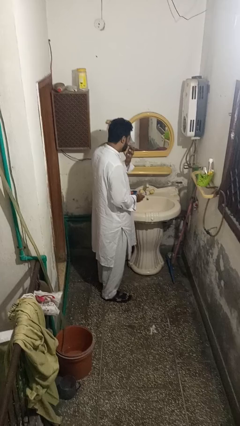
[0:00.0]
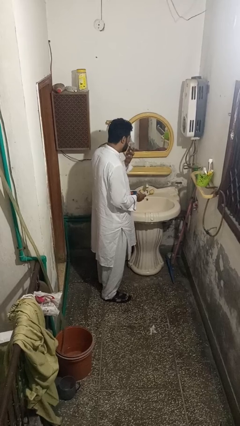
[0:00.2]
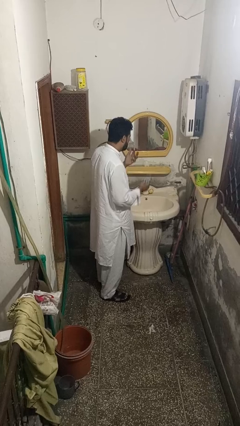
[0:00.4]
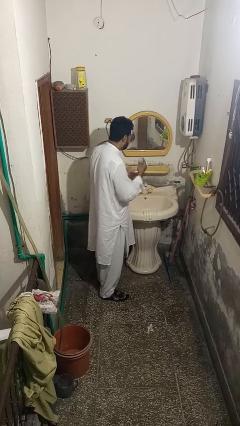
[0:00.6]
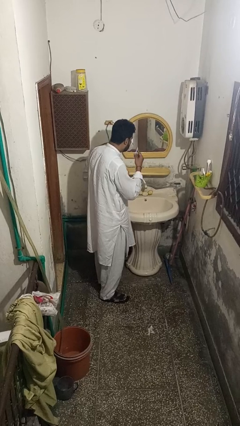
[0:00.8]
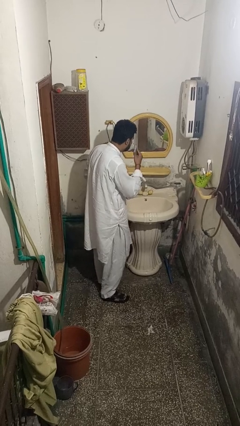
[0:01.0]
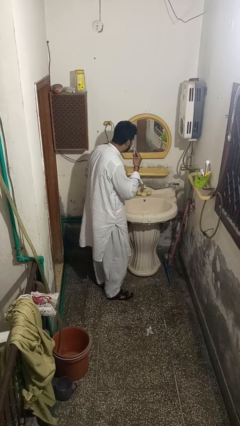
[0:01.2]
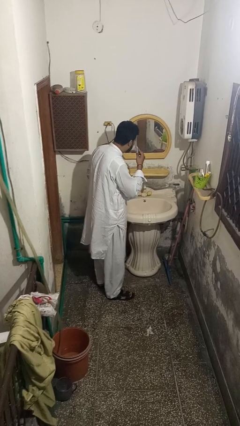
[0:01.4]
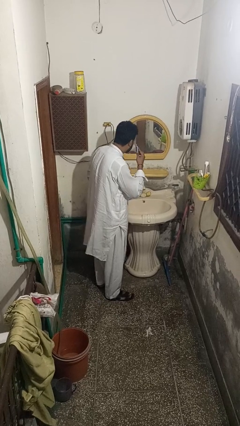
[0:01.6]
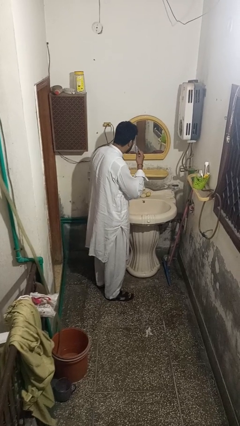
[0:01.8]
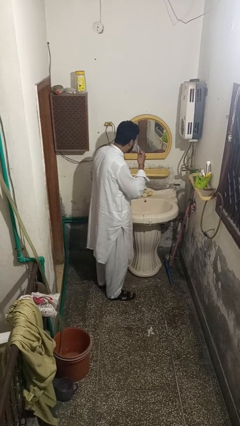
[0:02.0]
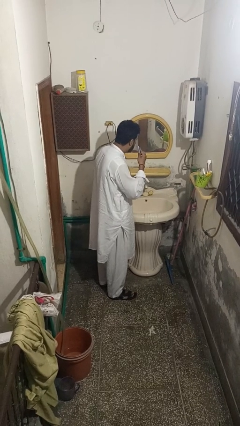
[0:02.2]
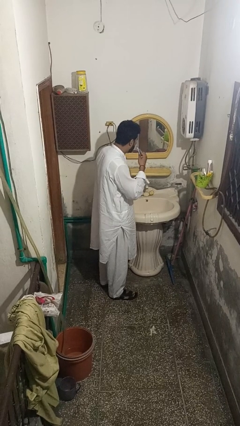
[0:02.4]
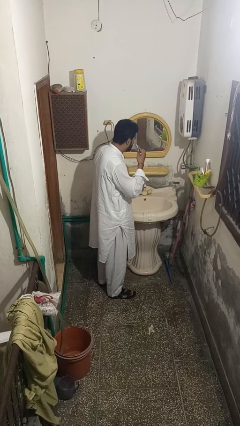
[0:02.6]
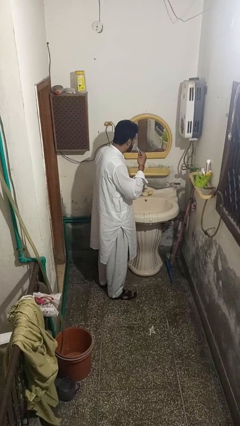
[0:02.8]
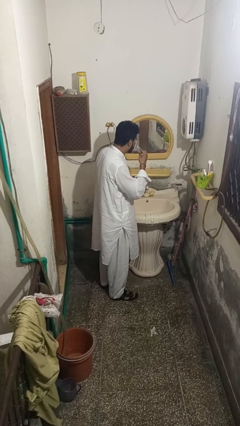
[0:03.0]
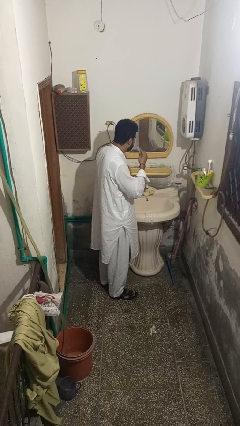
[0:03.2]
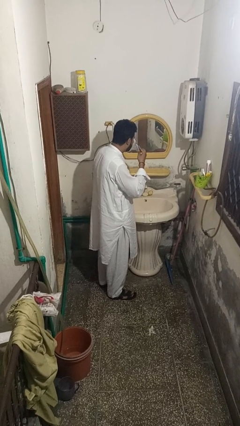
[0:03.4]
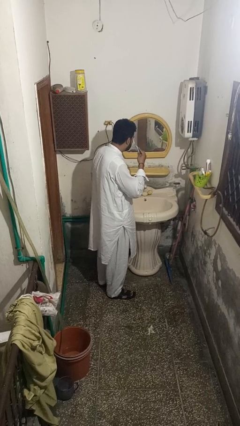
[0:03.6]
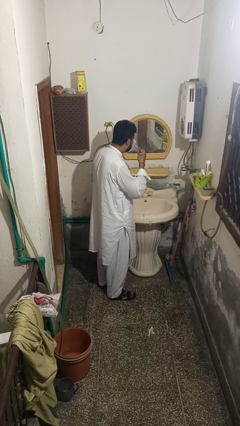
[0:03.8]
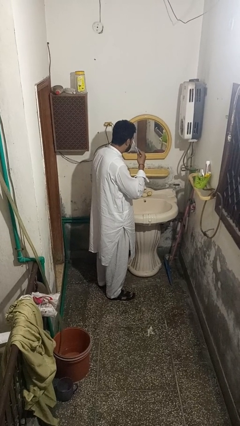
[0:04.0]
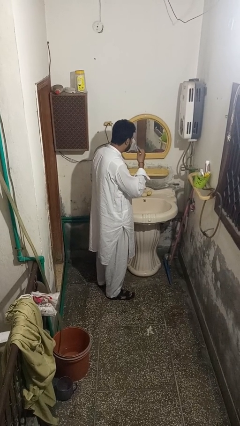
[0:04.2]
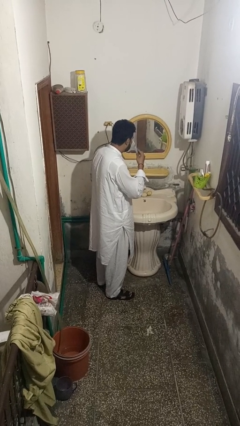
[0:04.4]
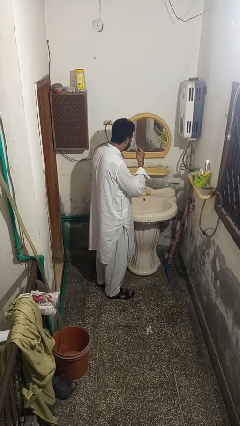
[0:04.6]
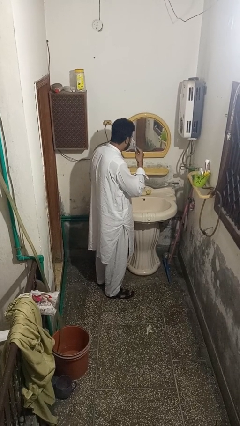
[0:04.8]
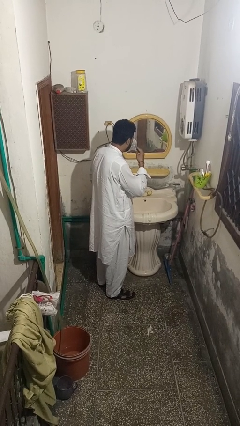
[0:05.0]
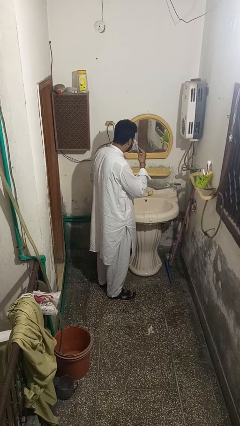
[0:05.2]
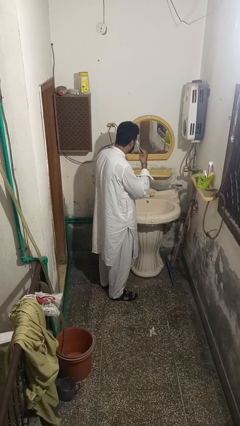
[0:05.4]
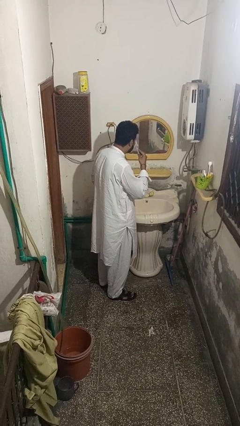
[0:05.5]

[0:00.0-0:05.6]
person shaves face

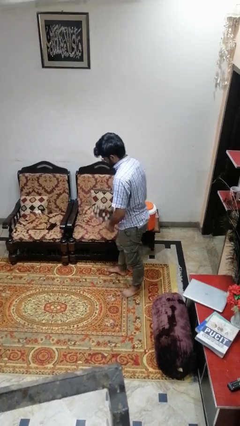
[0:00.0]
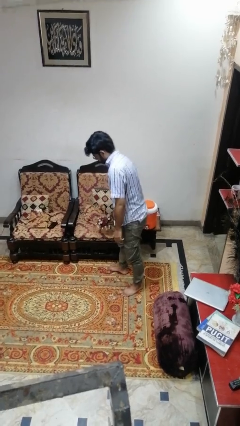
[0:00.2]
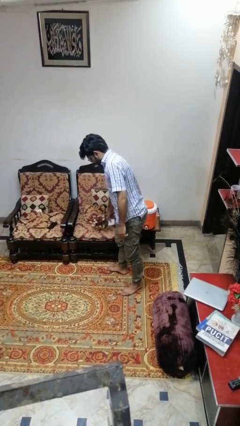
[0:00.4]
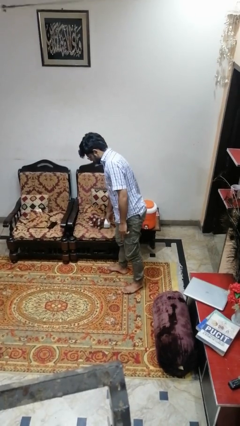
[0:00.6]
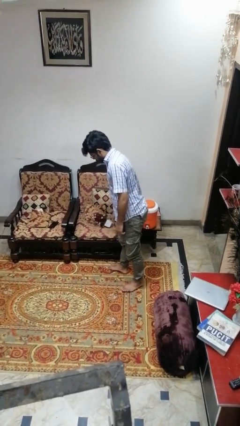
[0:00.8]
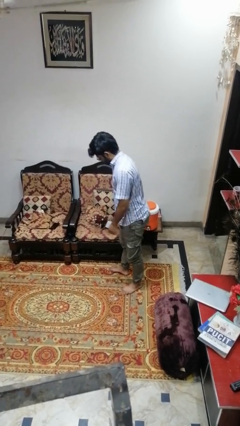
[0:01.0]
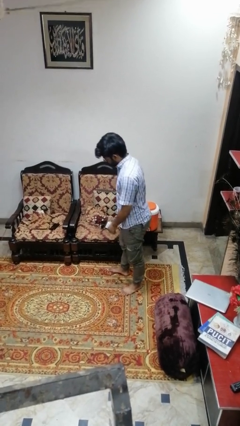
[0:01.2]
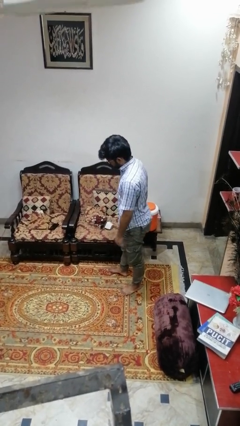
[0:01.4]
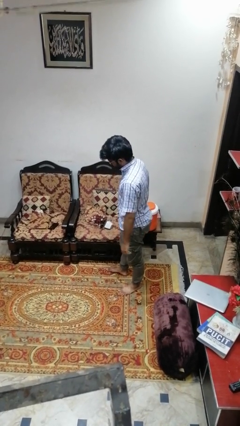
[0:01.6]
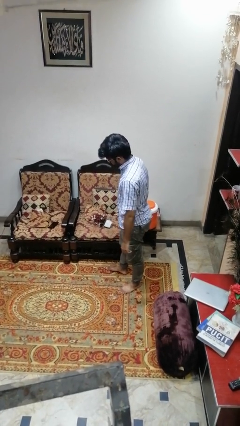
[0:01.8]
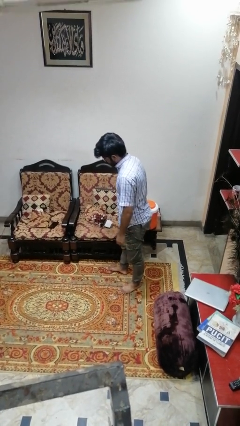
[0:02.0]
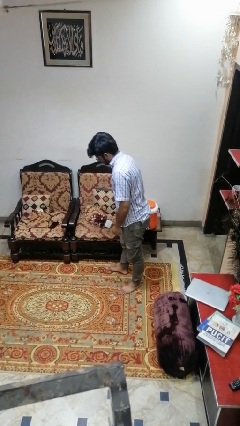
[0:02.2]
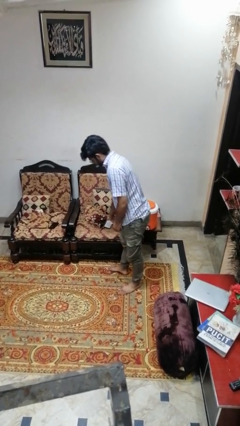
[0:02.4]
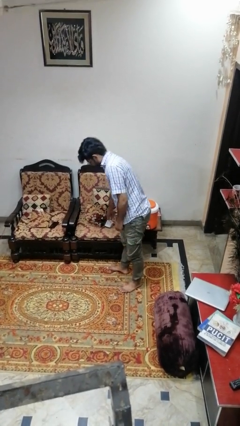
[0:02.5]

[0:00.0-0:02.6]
person puts down object on couch

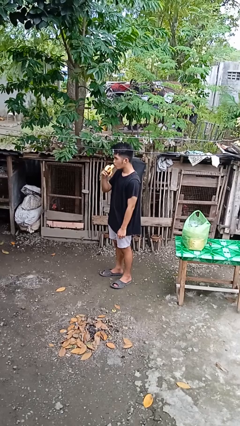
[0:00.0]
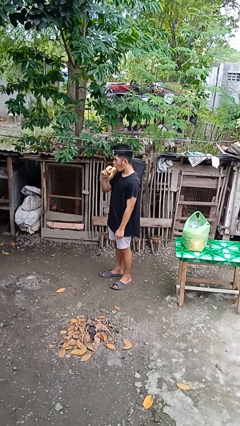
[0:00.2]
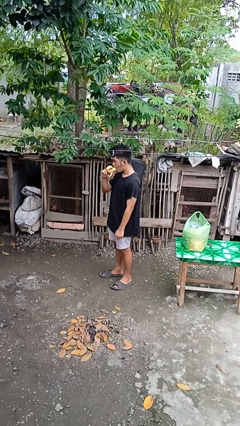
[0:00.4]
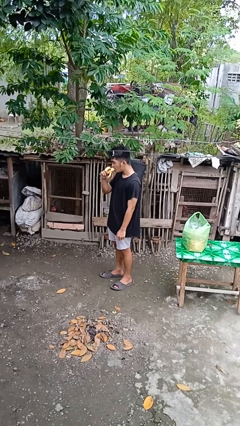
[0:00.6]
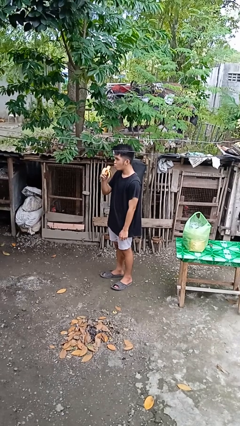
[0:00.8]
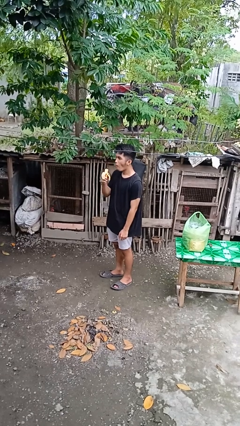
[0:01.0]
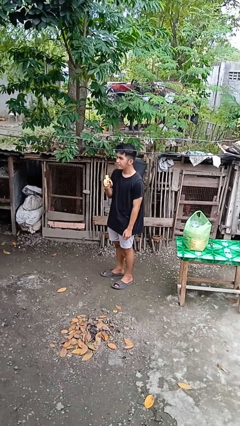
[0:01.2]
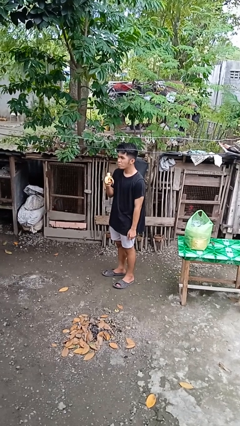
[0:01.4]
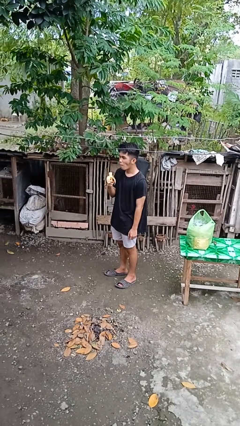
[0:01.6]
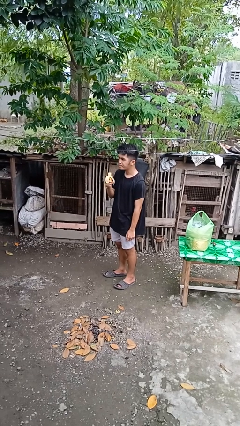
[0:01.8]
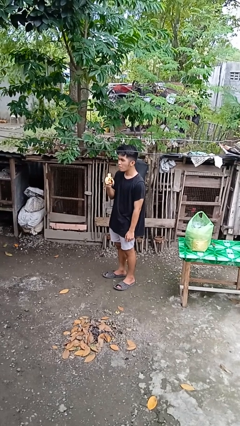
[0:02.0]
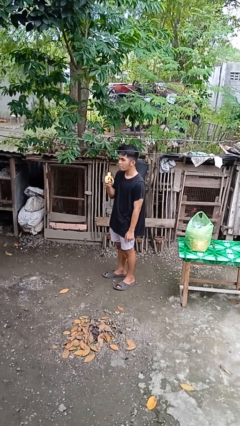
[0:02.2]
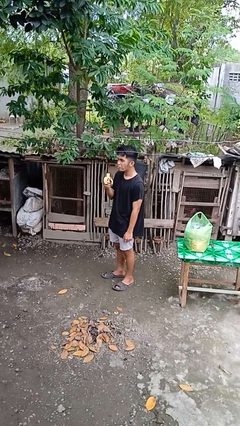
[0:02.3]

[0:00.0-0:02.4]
person eats banana

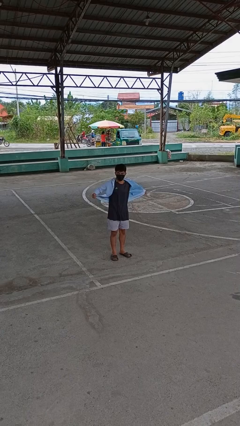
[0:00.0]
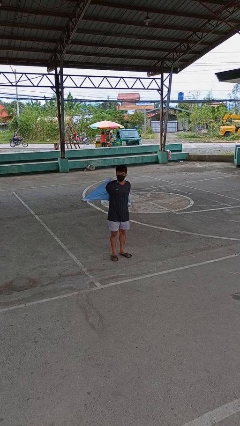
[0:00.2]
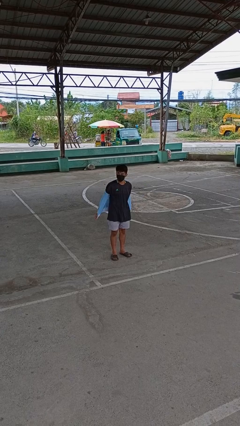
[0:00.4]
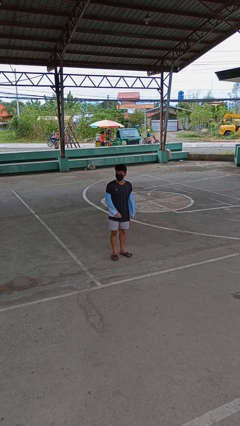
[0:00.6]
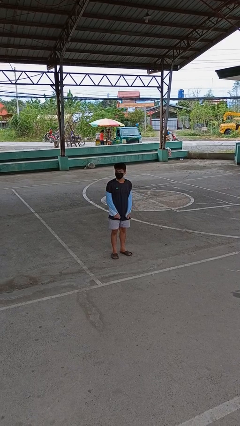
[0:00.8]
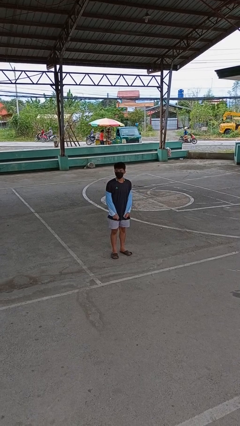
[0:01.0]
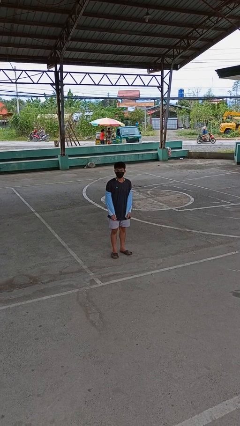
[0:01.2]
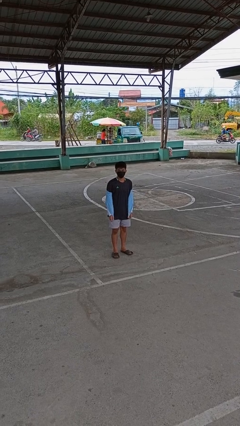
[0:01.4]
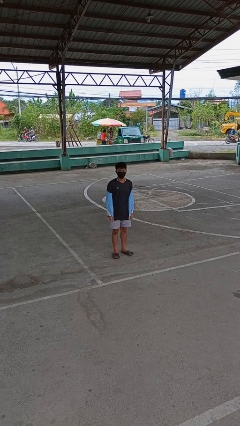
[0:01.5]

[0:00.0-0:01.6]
person takes off jacket

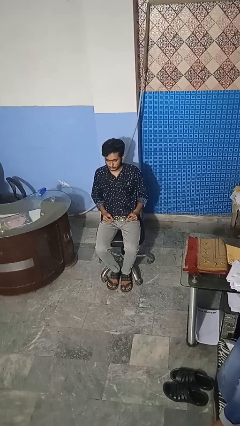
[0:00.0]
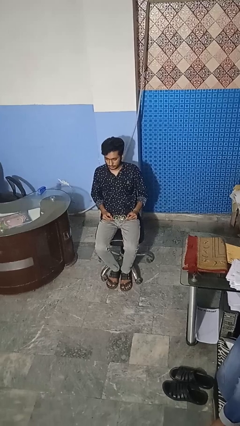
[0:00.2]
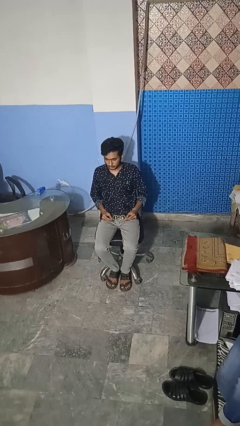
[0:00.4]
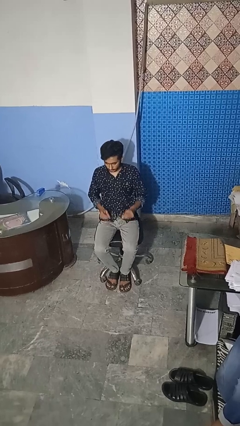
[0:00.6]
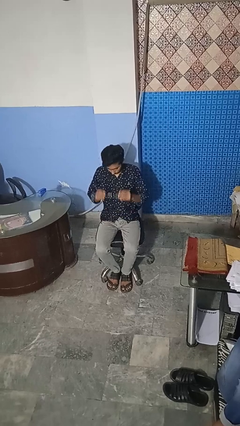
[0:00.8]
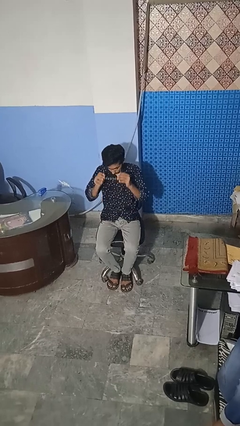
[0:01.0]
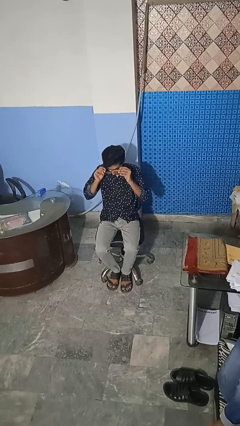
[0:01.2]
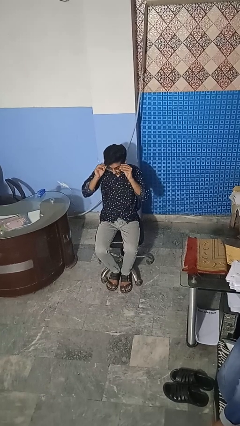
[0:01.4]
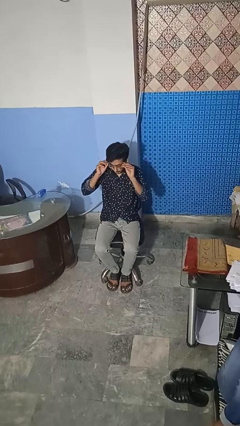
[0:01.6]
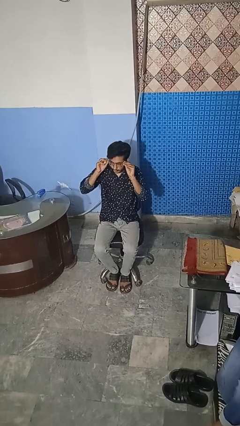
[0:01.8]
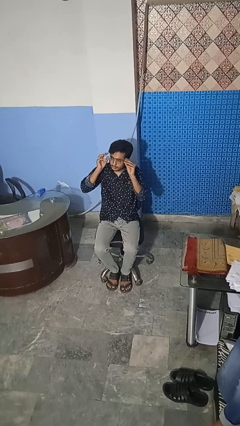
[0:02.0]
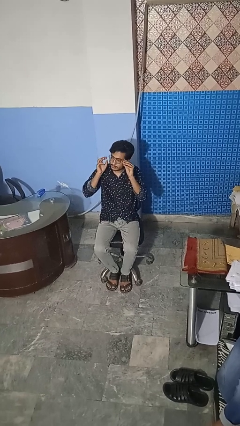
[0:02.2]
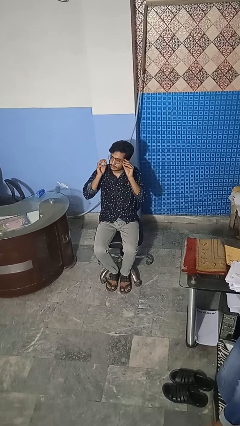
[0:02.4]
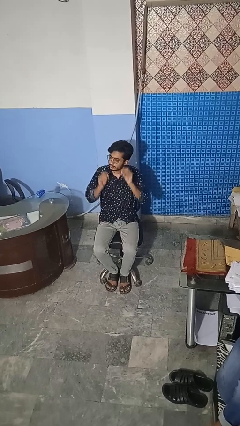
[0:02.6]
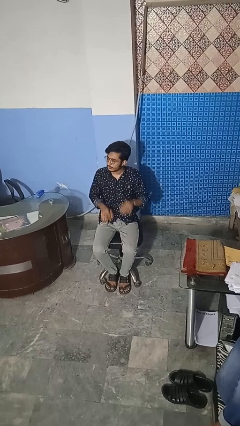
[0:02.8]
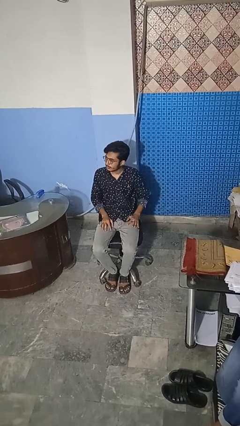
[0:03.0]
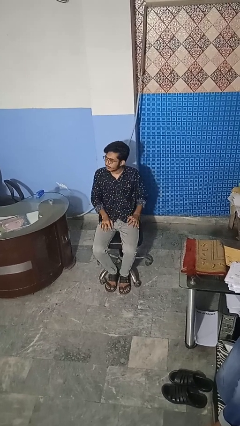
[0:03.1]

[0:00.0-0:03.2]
person puts on glasses

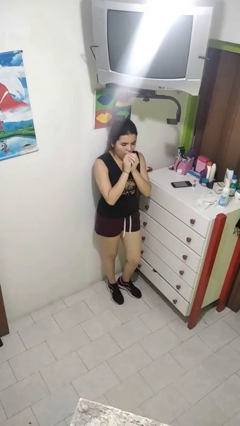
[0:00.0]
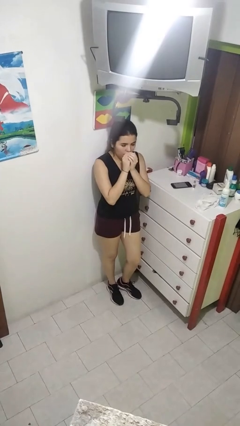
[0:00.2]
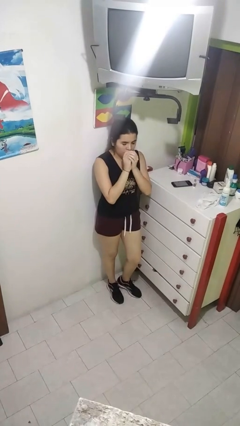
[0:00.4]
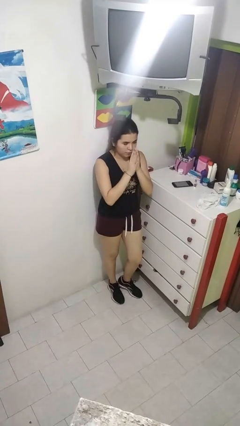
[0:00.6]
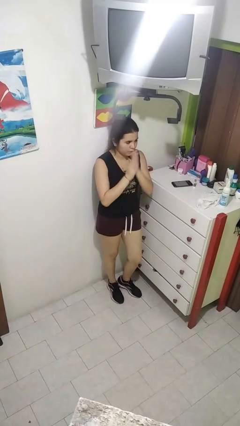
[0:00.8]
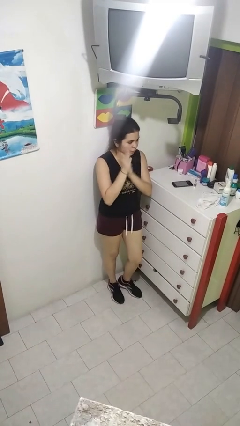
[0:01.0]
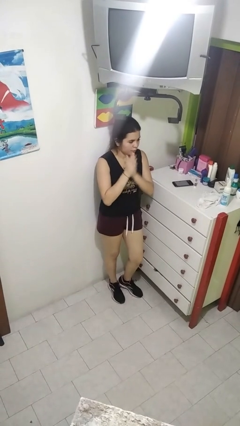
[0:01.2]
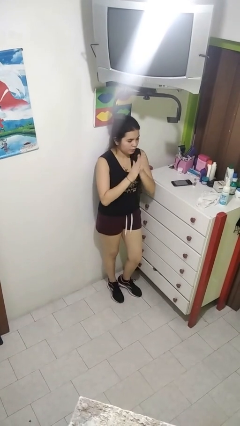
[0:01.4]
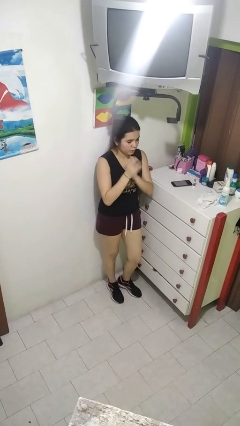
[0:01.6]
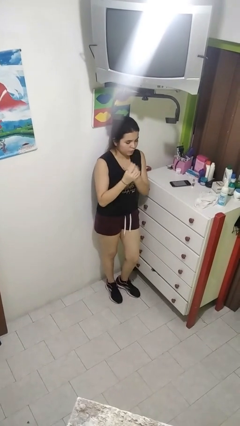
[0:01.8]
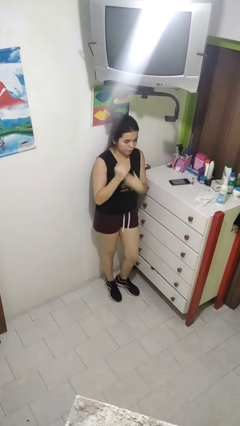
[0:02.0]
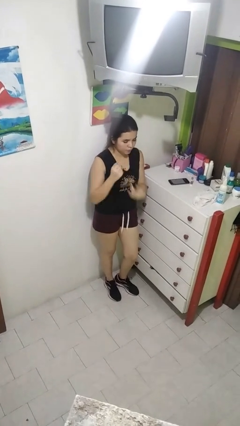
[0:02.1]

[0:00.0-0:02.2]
person blows into hands
